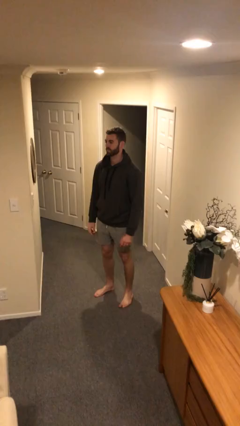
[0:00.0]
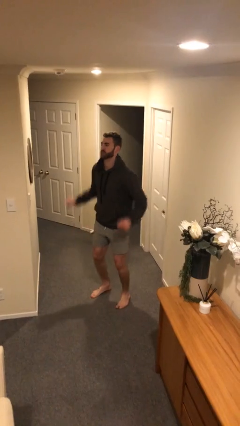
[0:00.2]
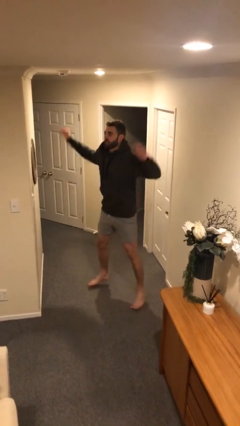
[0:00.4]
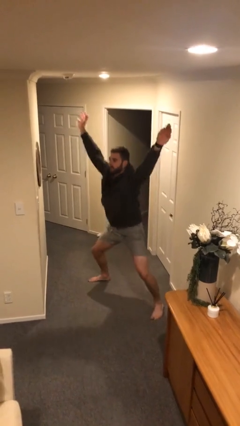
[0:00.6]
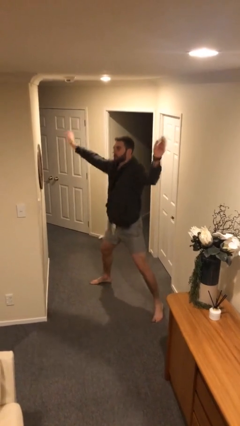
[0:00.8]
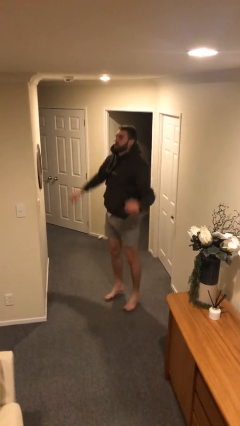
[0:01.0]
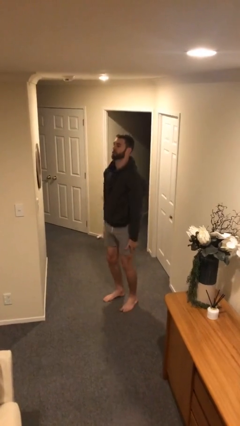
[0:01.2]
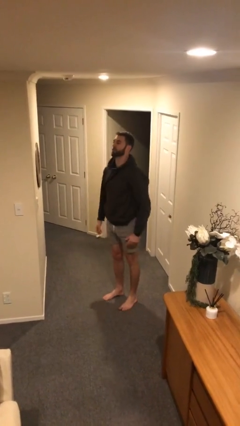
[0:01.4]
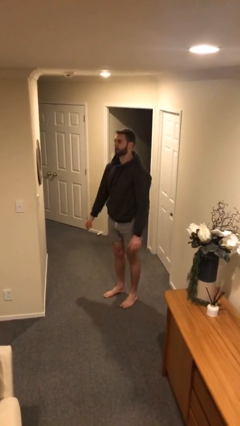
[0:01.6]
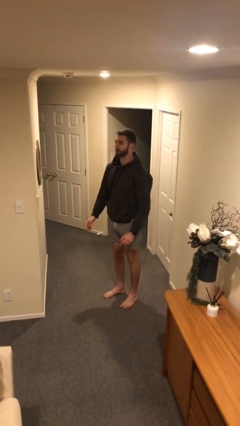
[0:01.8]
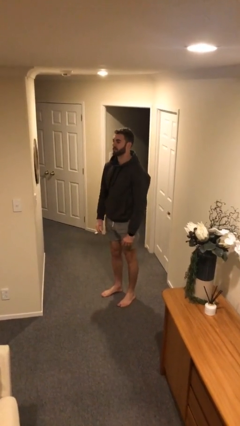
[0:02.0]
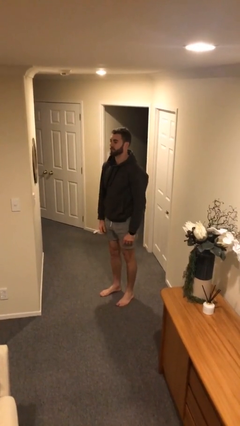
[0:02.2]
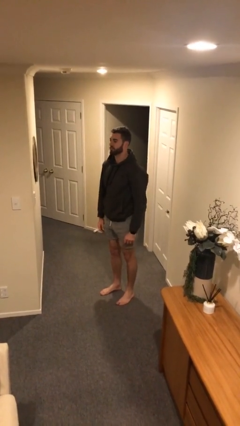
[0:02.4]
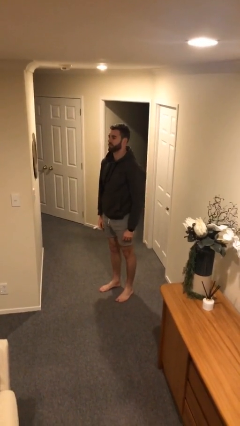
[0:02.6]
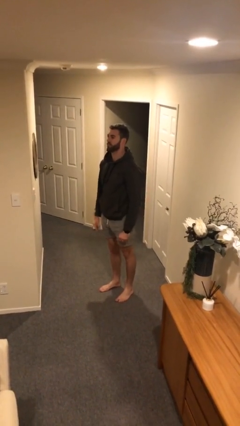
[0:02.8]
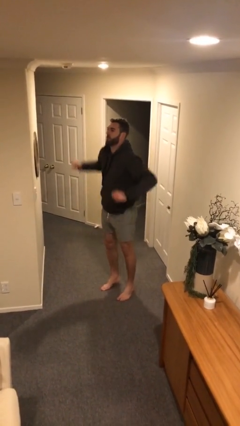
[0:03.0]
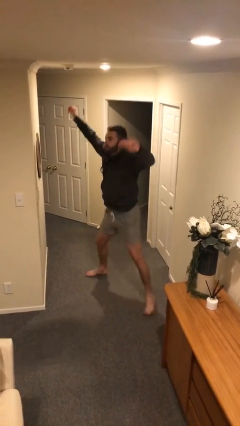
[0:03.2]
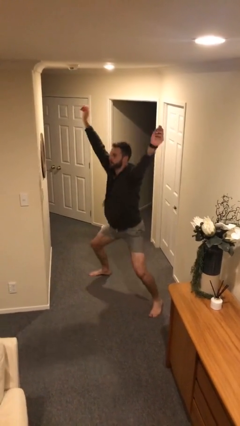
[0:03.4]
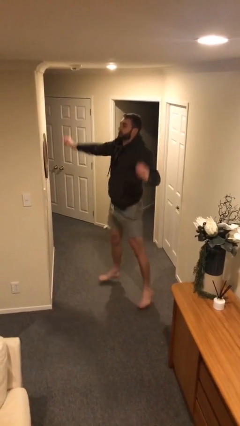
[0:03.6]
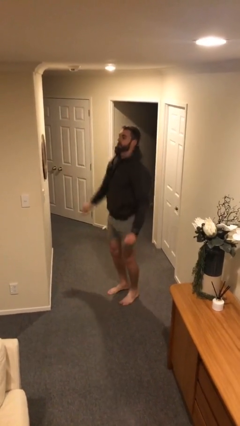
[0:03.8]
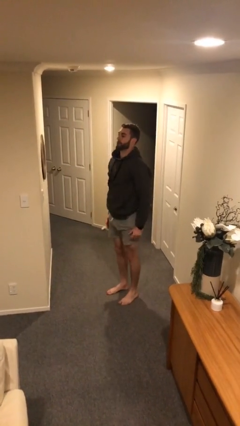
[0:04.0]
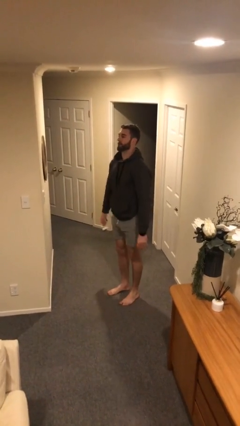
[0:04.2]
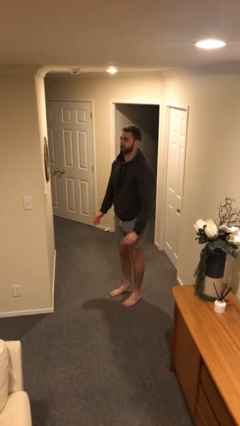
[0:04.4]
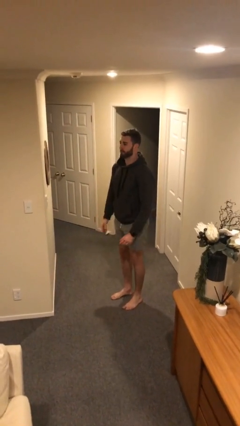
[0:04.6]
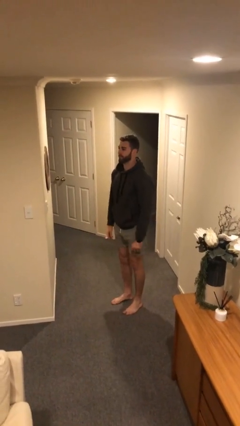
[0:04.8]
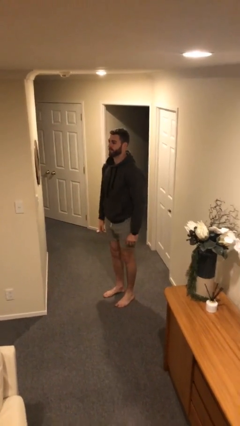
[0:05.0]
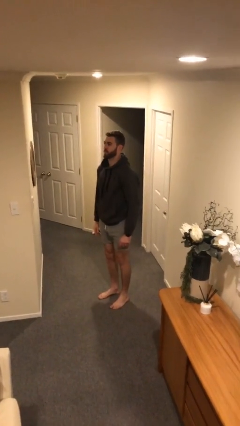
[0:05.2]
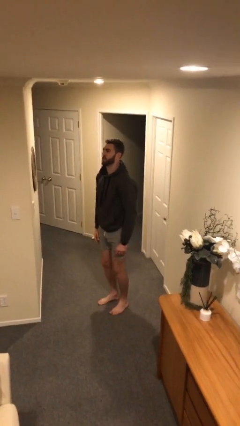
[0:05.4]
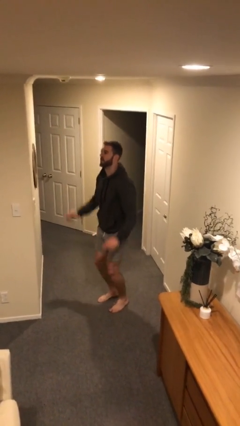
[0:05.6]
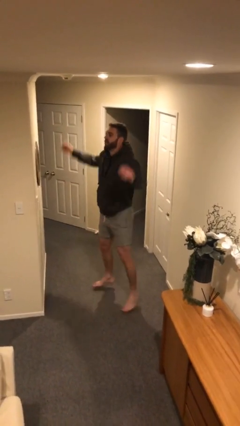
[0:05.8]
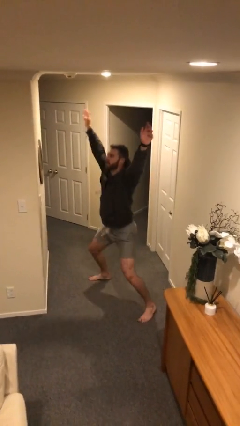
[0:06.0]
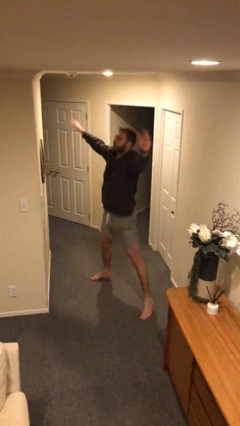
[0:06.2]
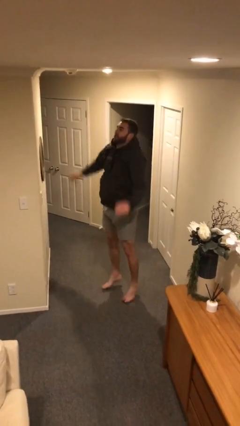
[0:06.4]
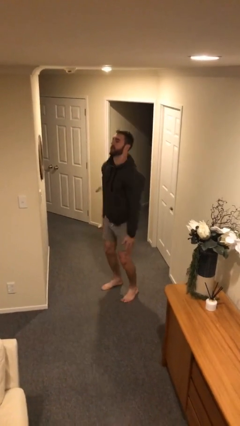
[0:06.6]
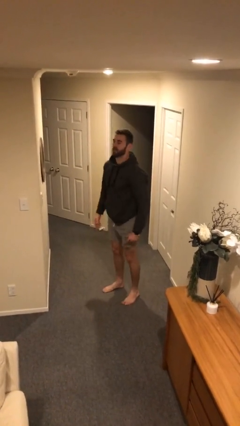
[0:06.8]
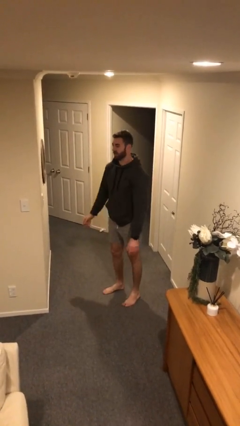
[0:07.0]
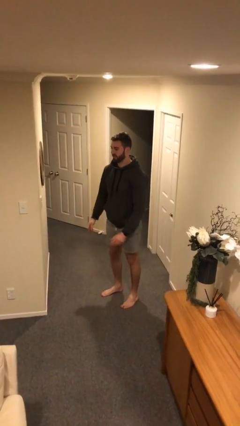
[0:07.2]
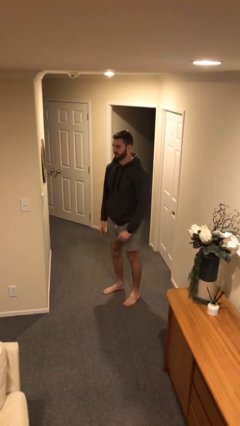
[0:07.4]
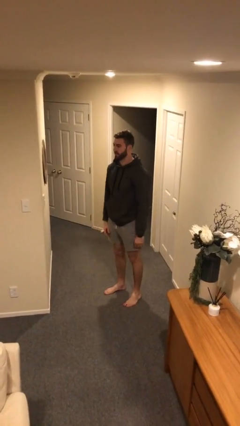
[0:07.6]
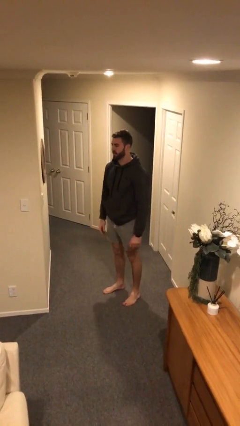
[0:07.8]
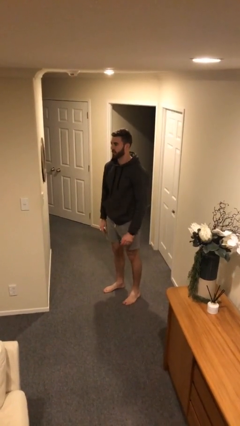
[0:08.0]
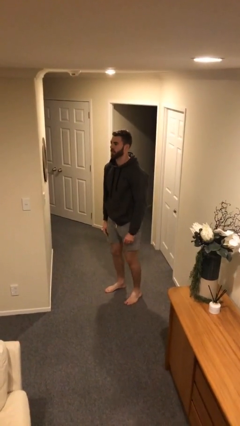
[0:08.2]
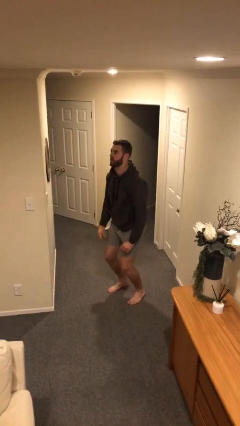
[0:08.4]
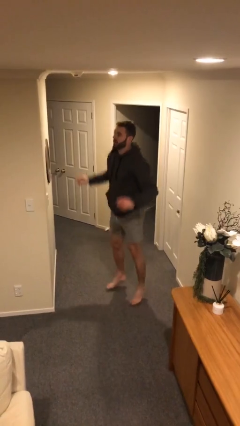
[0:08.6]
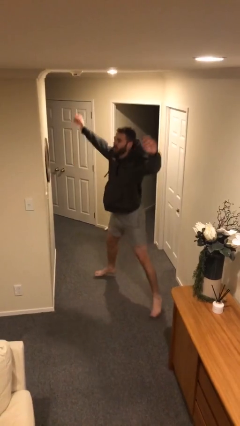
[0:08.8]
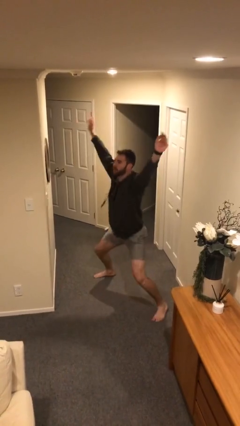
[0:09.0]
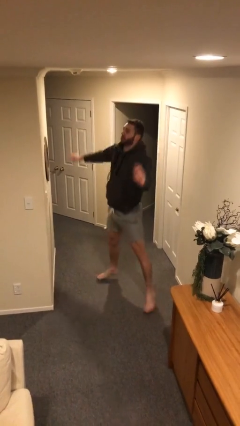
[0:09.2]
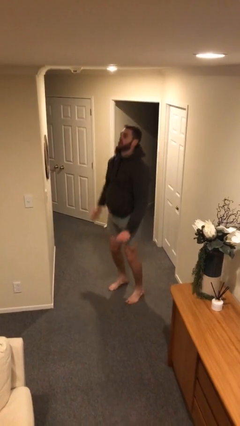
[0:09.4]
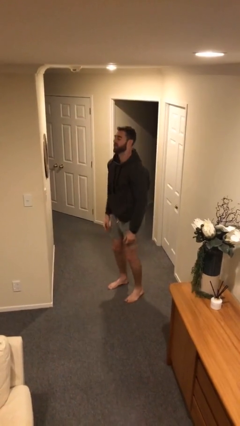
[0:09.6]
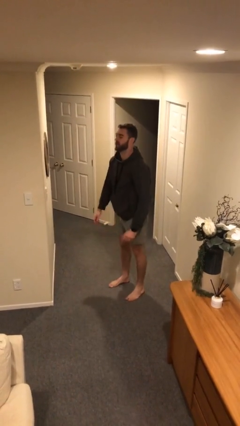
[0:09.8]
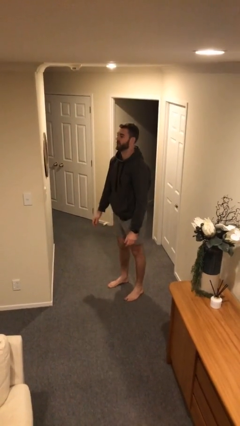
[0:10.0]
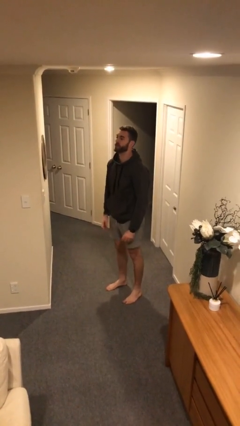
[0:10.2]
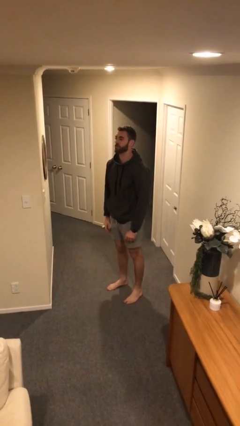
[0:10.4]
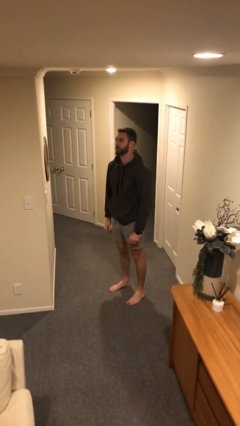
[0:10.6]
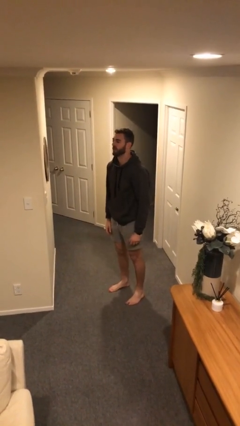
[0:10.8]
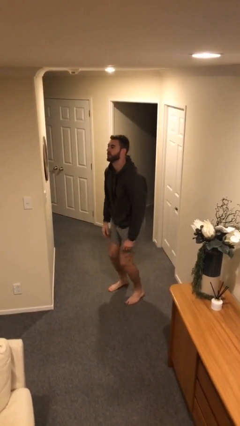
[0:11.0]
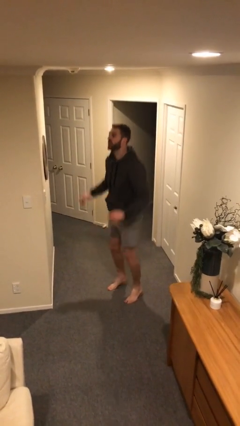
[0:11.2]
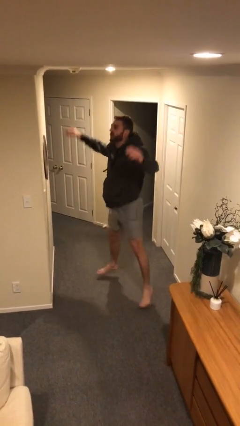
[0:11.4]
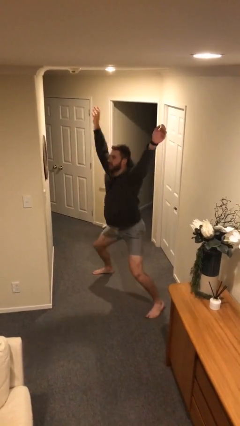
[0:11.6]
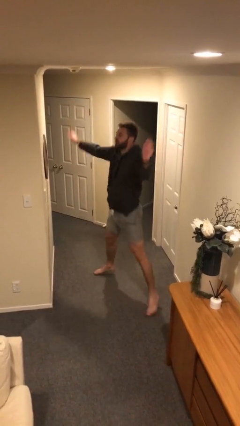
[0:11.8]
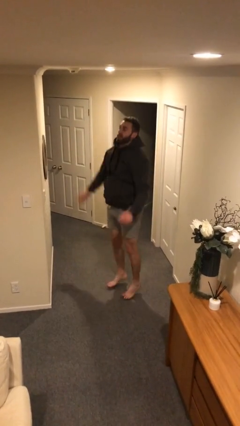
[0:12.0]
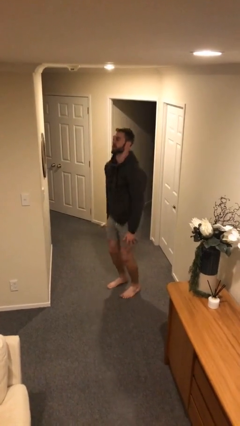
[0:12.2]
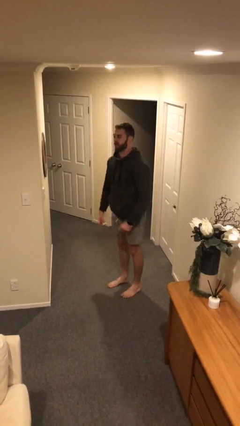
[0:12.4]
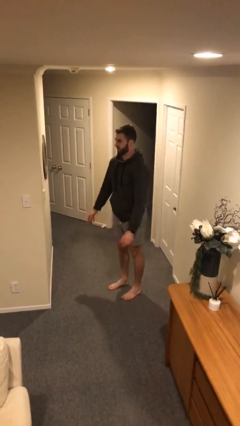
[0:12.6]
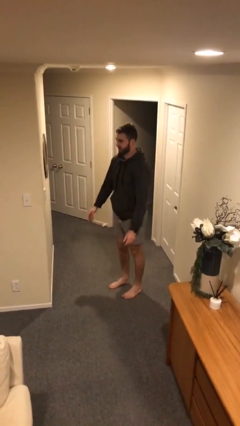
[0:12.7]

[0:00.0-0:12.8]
person exercises with jumping jacks

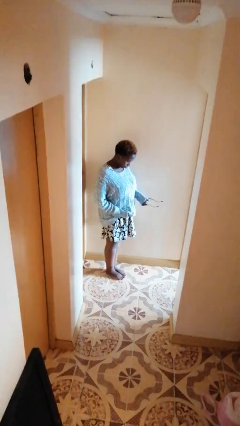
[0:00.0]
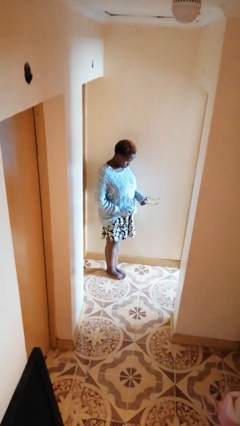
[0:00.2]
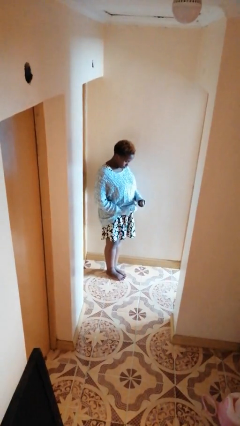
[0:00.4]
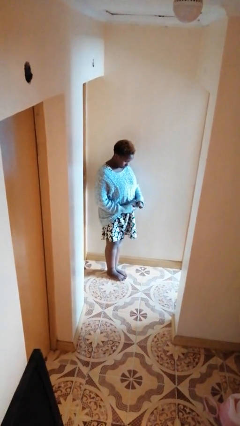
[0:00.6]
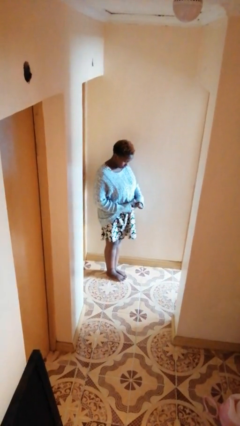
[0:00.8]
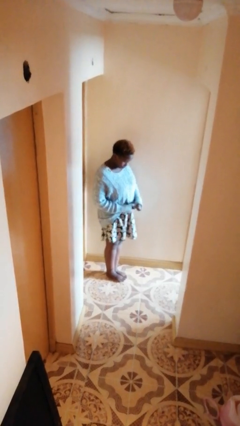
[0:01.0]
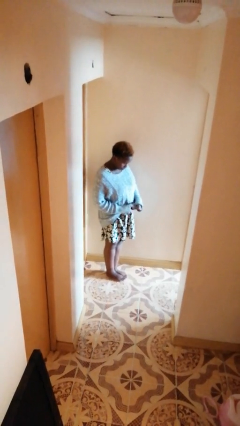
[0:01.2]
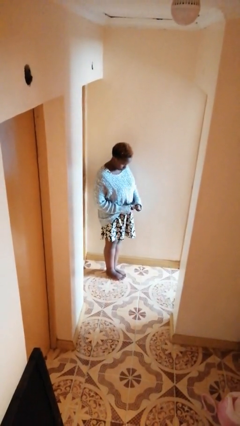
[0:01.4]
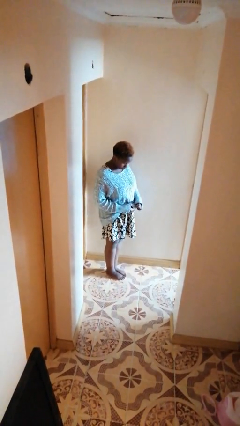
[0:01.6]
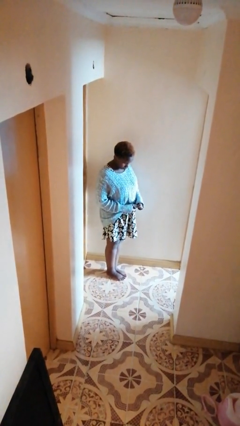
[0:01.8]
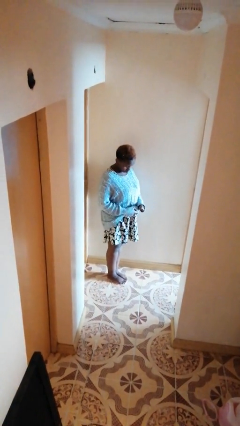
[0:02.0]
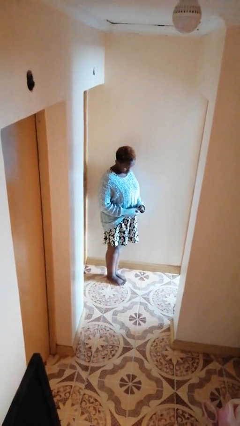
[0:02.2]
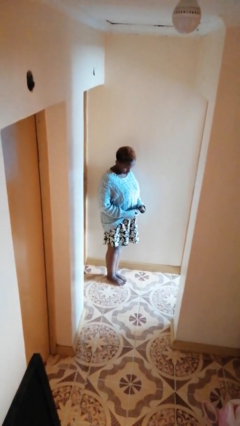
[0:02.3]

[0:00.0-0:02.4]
person cleans eyeglasses

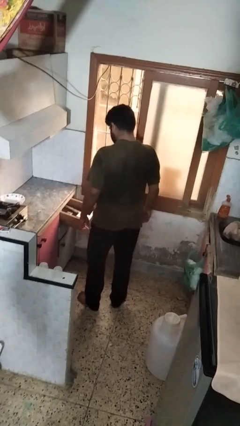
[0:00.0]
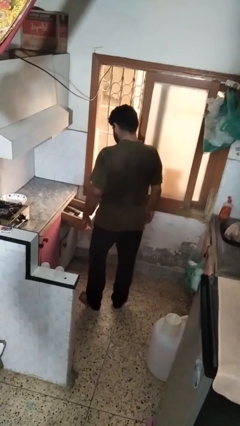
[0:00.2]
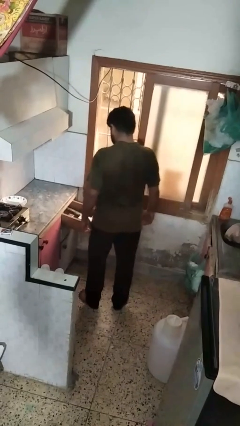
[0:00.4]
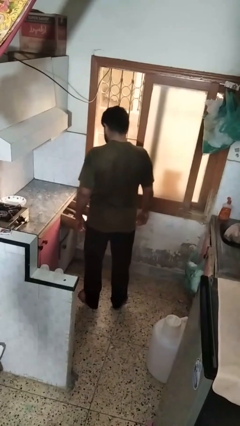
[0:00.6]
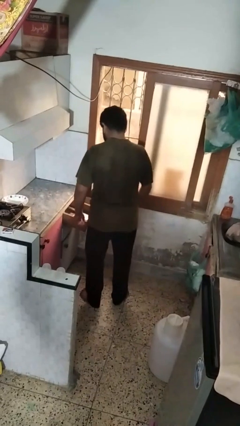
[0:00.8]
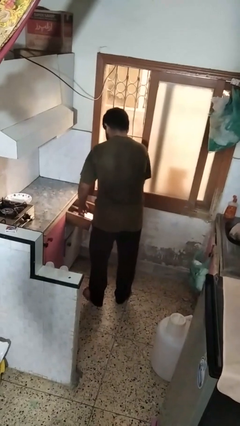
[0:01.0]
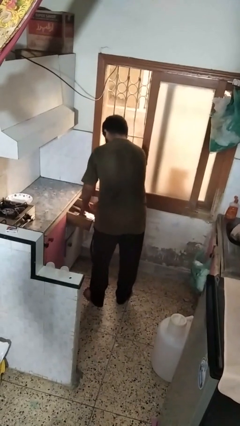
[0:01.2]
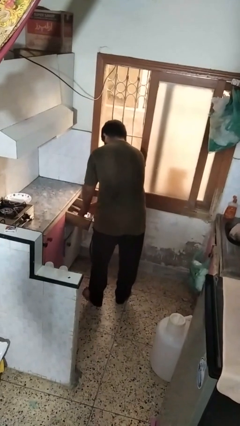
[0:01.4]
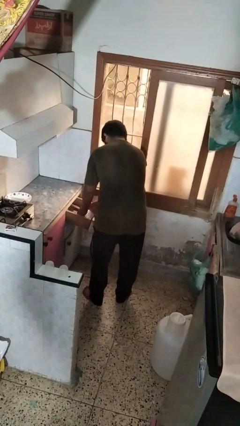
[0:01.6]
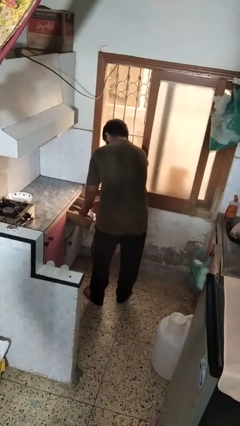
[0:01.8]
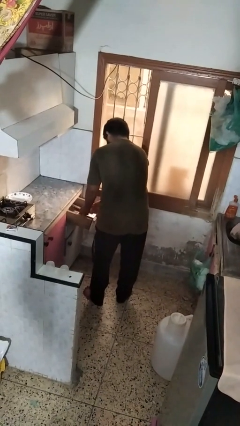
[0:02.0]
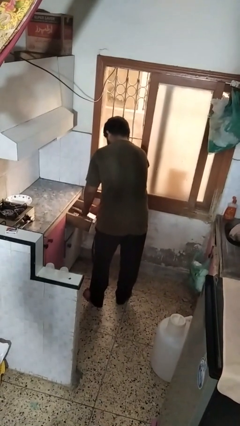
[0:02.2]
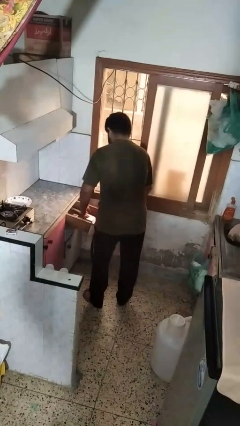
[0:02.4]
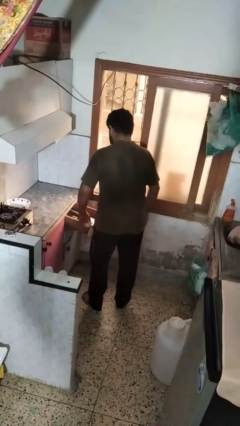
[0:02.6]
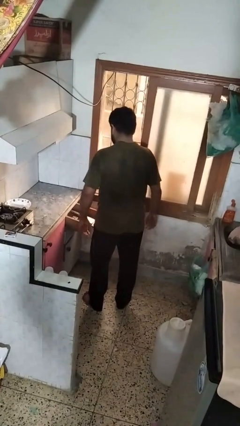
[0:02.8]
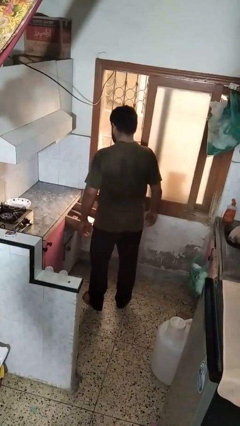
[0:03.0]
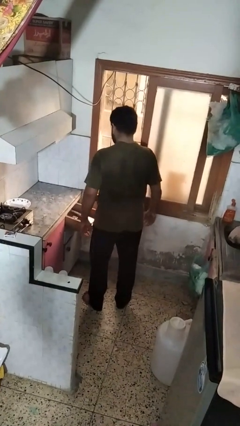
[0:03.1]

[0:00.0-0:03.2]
person searches in kitchen drawer
